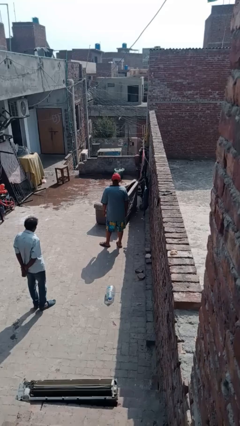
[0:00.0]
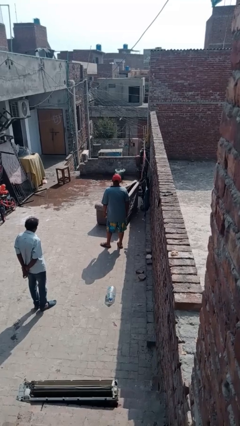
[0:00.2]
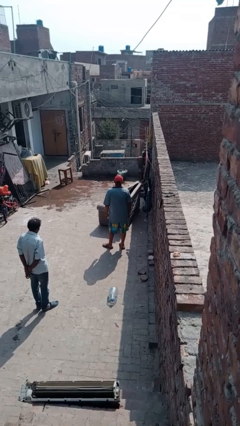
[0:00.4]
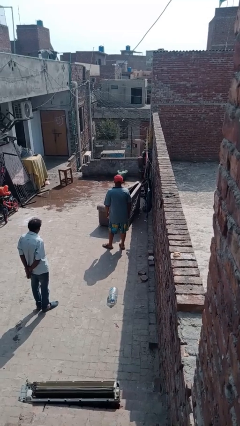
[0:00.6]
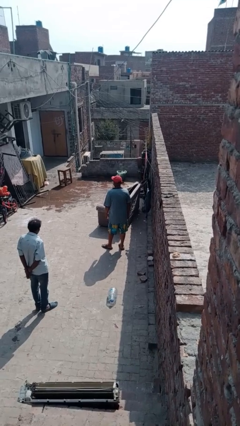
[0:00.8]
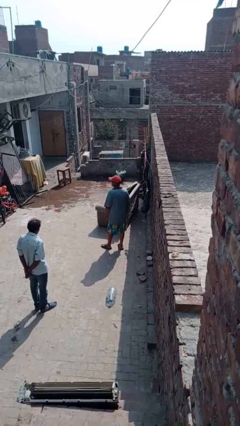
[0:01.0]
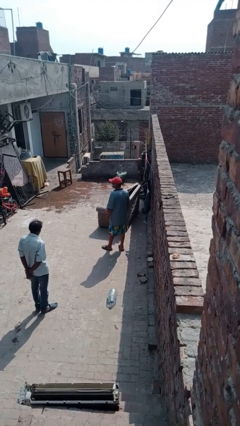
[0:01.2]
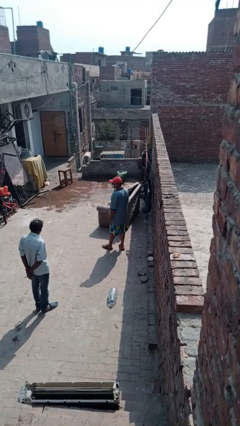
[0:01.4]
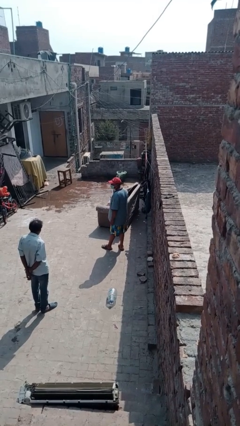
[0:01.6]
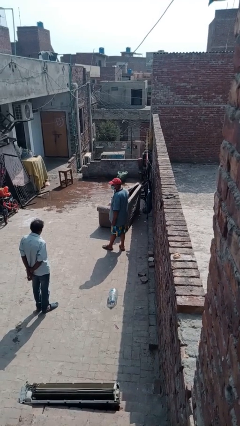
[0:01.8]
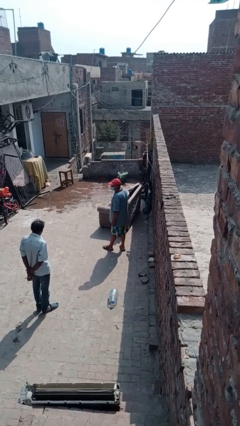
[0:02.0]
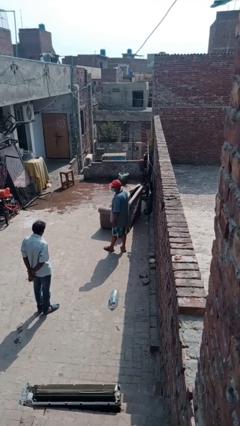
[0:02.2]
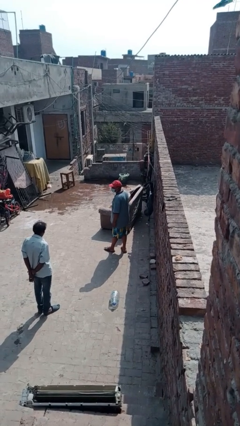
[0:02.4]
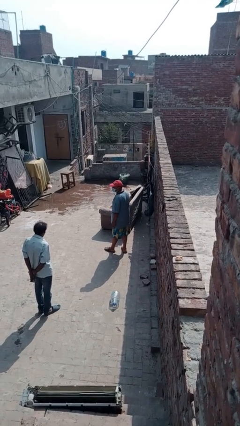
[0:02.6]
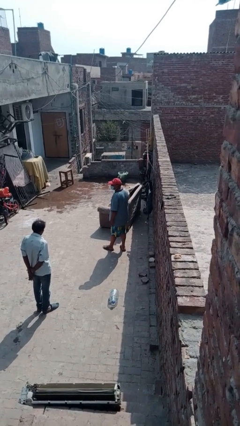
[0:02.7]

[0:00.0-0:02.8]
person looks over shoulder

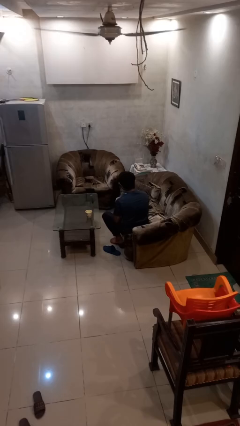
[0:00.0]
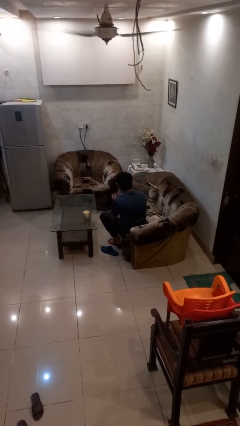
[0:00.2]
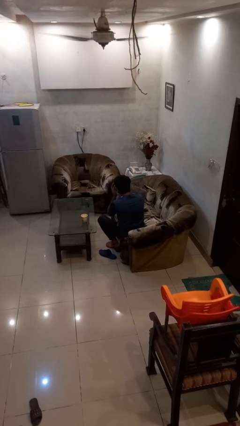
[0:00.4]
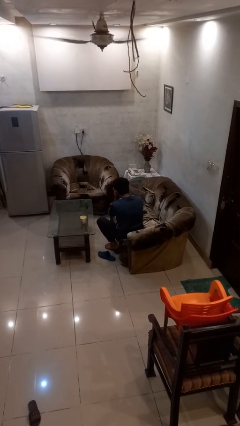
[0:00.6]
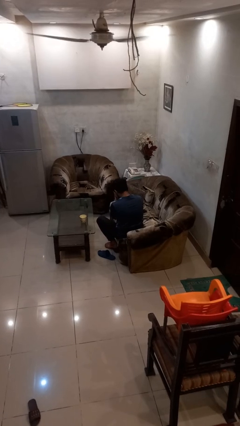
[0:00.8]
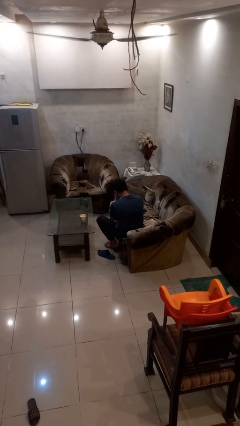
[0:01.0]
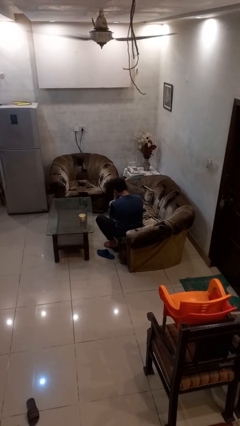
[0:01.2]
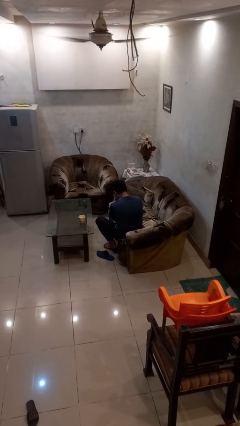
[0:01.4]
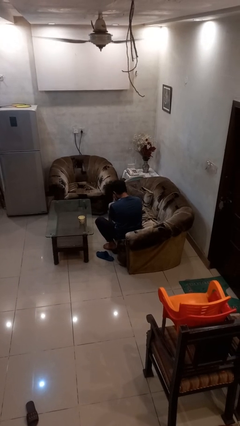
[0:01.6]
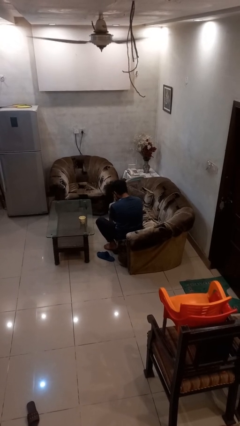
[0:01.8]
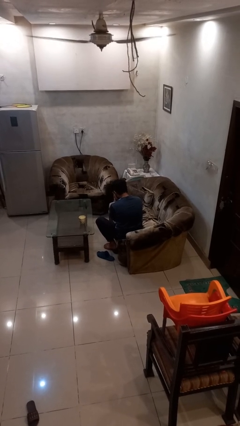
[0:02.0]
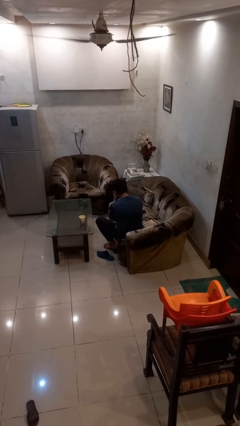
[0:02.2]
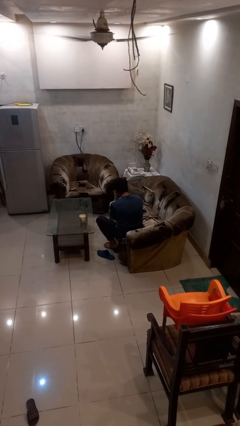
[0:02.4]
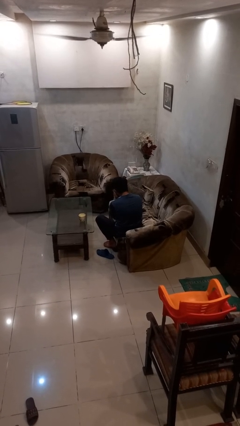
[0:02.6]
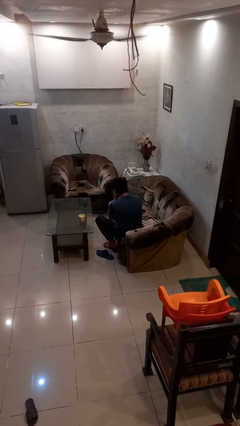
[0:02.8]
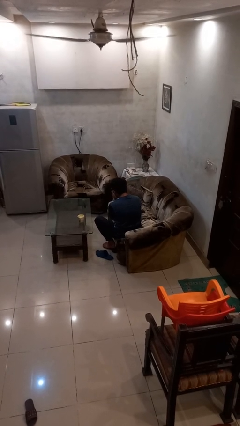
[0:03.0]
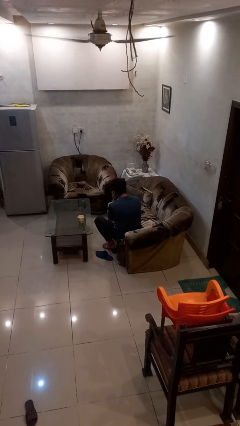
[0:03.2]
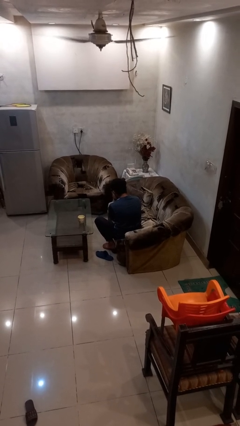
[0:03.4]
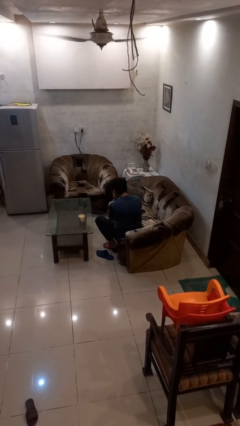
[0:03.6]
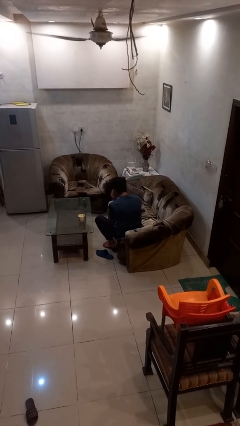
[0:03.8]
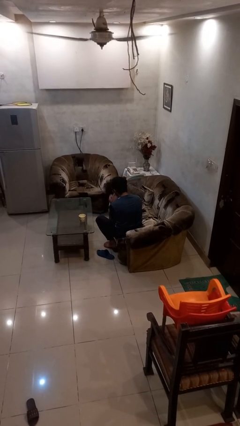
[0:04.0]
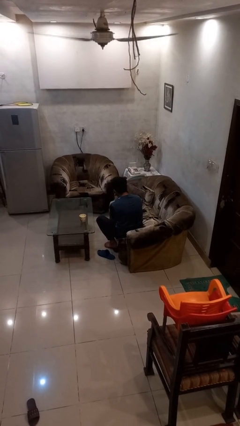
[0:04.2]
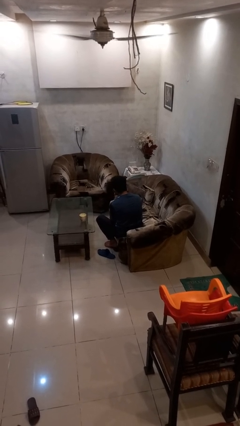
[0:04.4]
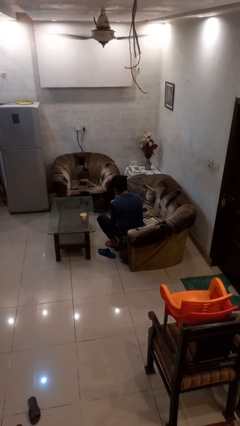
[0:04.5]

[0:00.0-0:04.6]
person covers face with hands

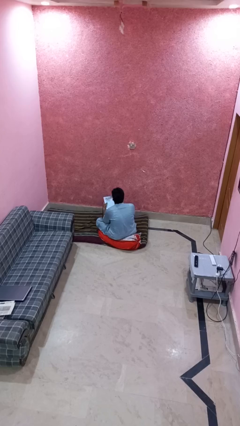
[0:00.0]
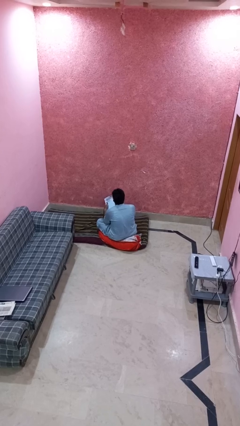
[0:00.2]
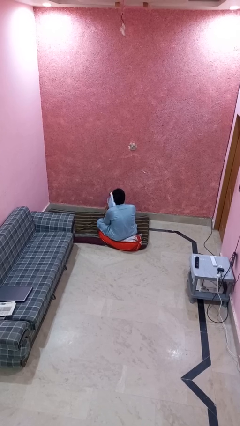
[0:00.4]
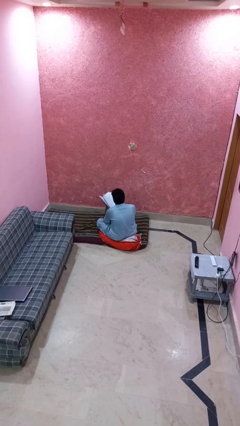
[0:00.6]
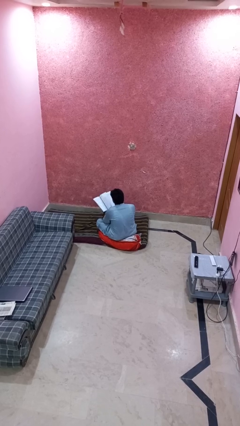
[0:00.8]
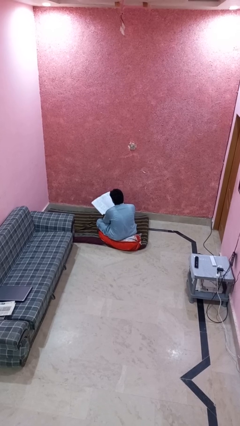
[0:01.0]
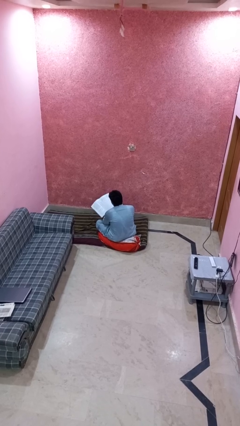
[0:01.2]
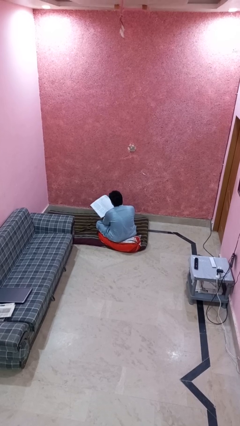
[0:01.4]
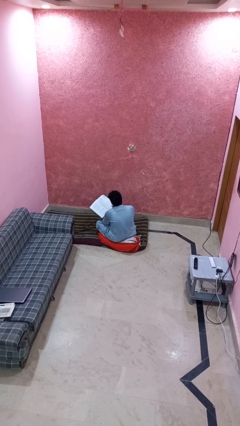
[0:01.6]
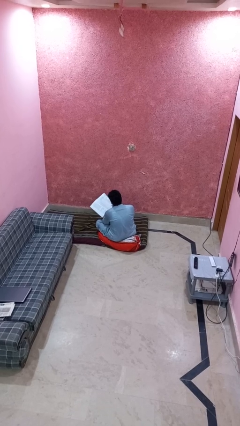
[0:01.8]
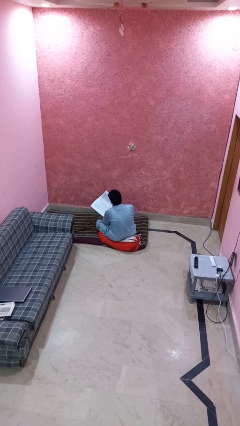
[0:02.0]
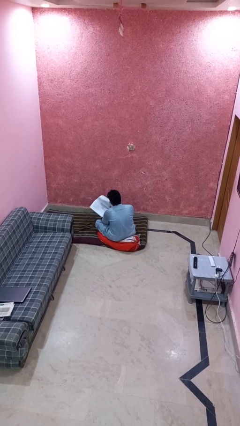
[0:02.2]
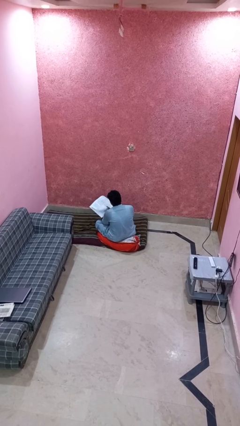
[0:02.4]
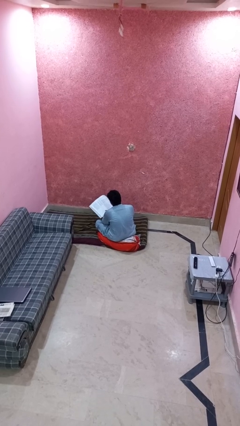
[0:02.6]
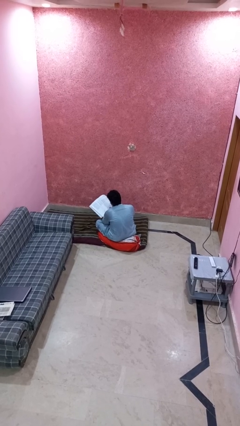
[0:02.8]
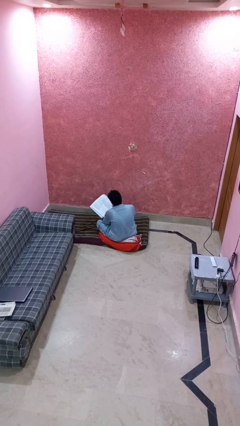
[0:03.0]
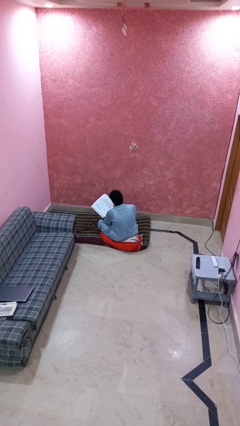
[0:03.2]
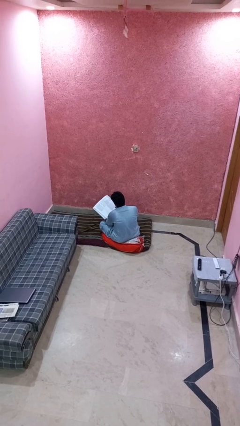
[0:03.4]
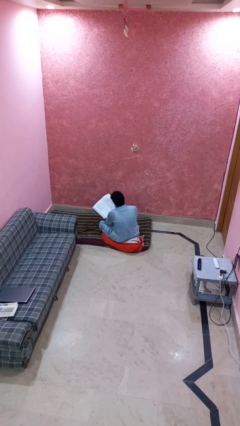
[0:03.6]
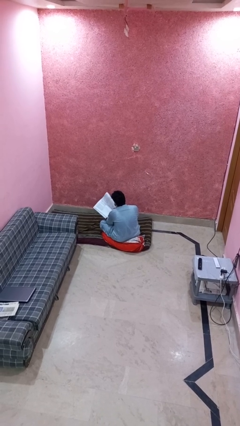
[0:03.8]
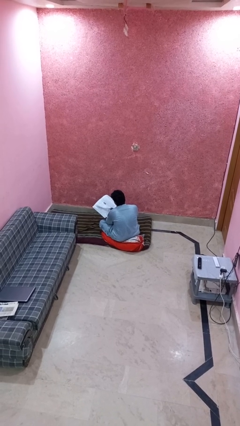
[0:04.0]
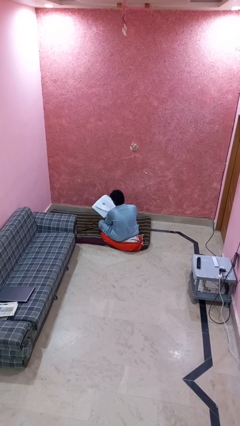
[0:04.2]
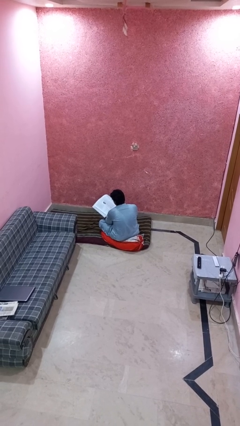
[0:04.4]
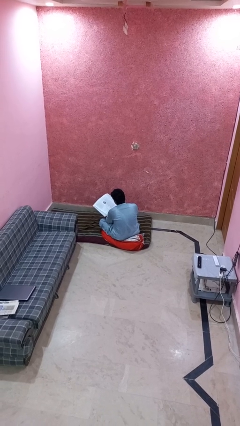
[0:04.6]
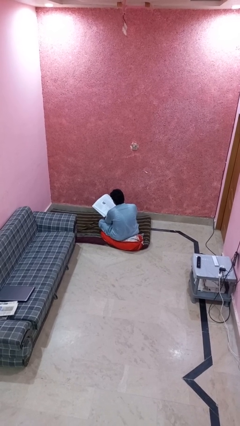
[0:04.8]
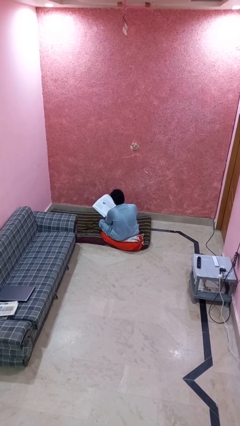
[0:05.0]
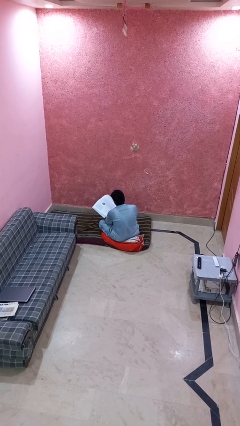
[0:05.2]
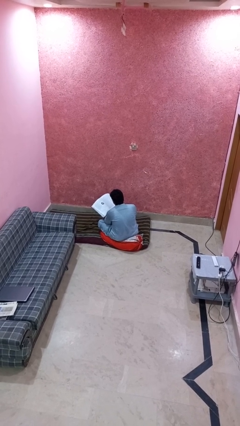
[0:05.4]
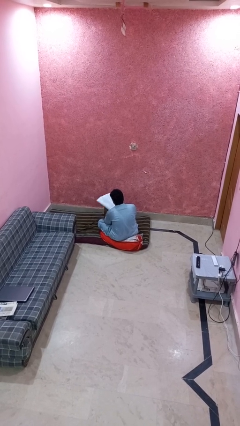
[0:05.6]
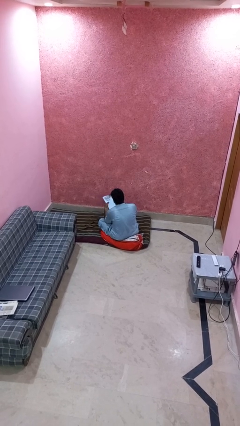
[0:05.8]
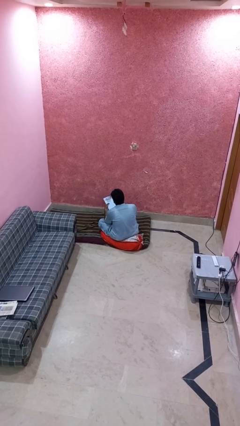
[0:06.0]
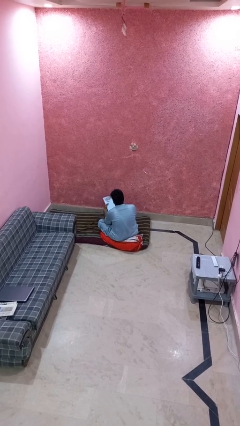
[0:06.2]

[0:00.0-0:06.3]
person reads magazine

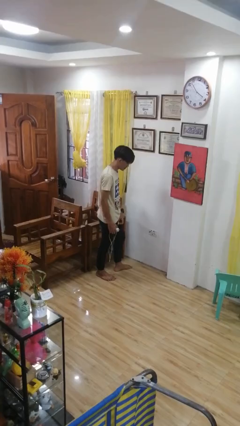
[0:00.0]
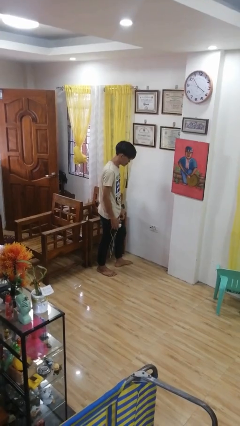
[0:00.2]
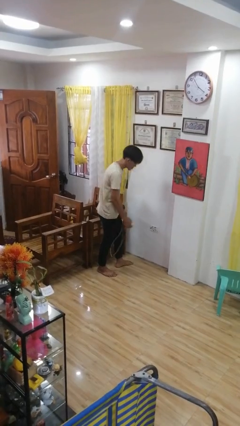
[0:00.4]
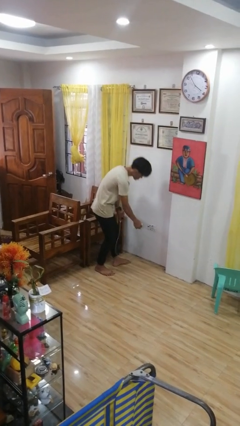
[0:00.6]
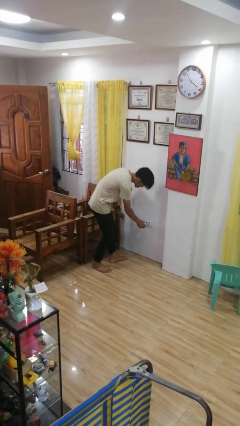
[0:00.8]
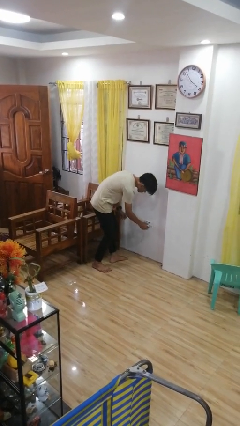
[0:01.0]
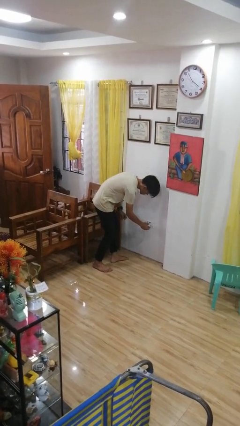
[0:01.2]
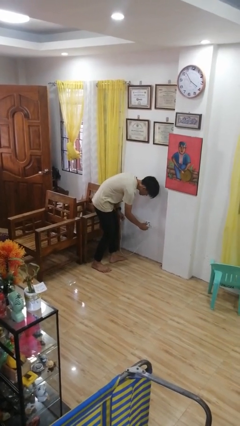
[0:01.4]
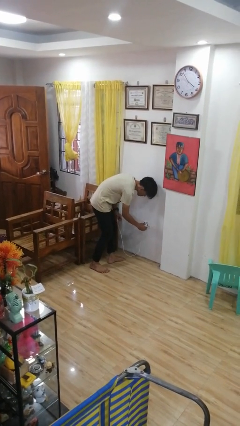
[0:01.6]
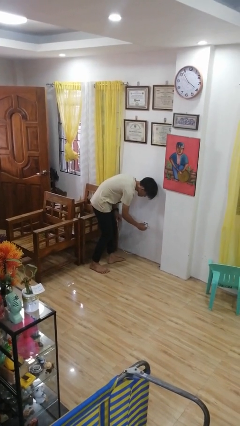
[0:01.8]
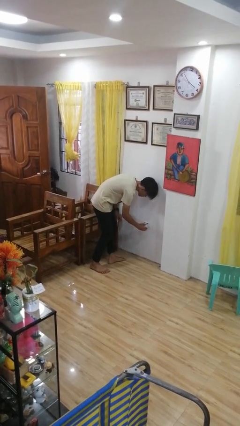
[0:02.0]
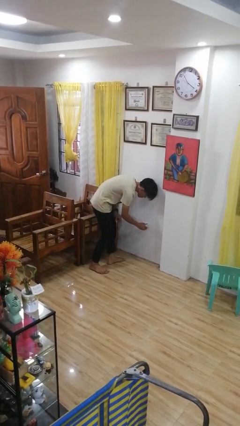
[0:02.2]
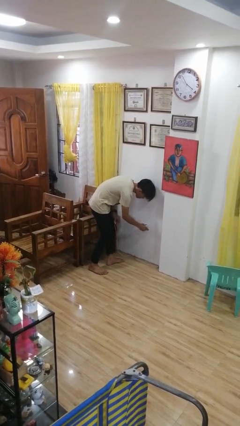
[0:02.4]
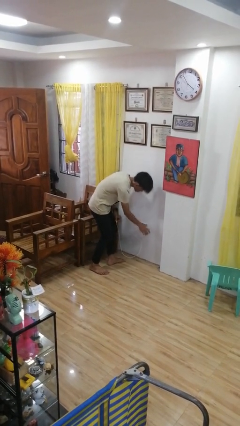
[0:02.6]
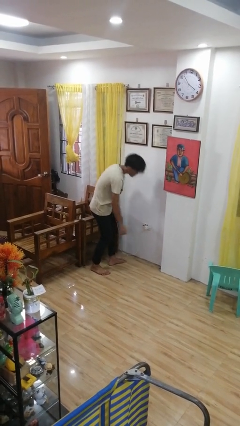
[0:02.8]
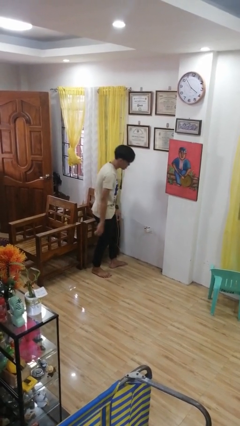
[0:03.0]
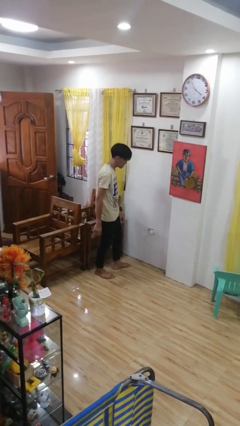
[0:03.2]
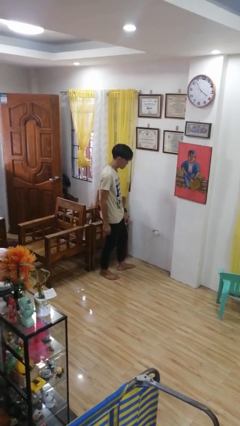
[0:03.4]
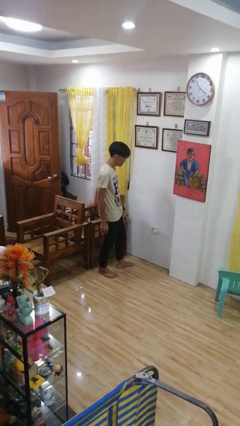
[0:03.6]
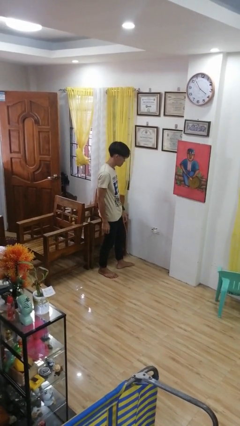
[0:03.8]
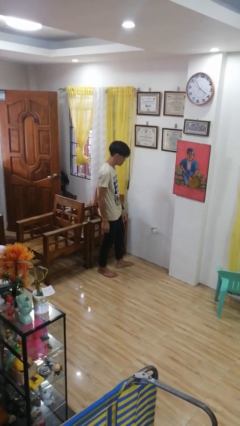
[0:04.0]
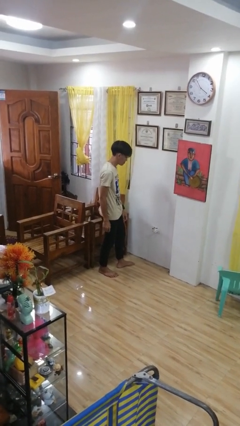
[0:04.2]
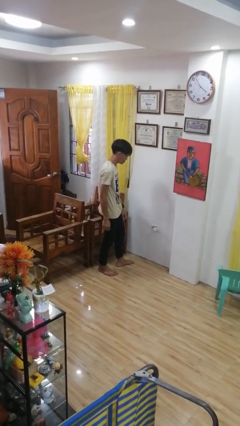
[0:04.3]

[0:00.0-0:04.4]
person plugs into electrical socket
